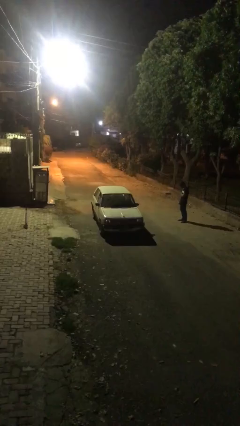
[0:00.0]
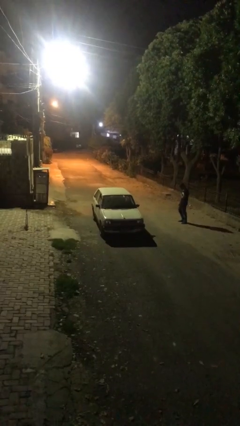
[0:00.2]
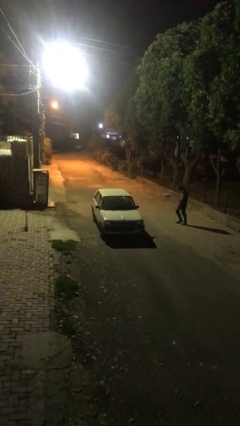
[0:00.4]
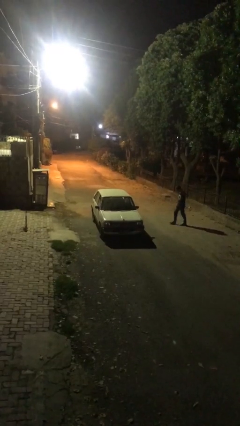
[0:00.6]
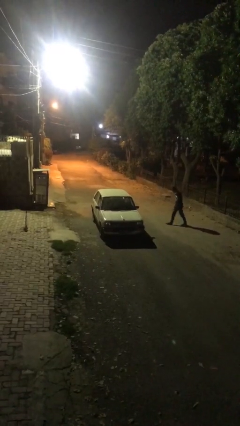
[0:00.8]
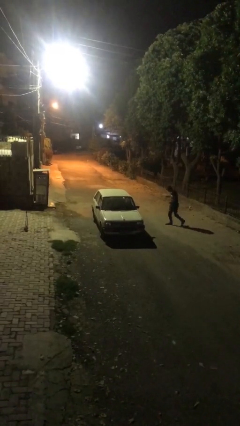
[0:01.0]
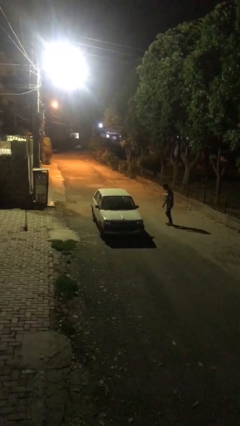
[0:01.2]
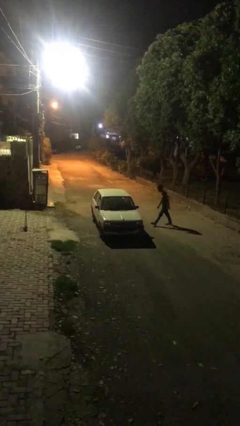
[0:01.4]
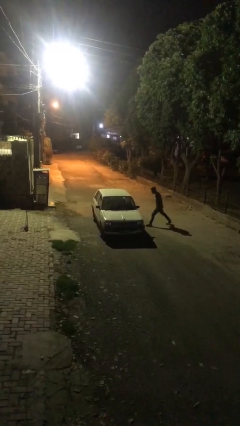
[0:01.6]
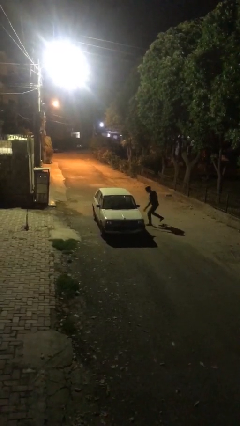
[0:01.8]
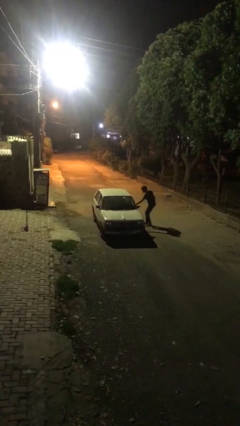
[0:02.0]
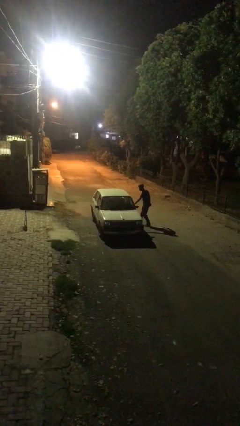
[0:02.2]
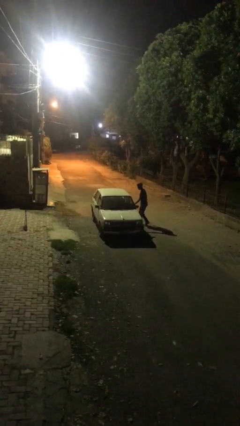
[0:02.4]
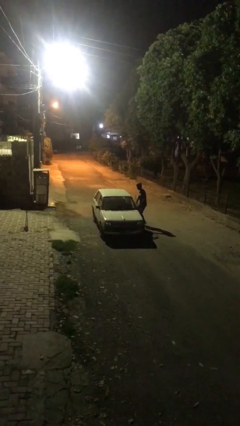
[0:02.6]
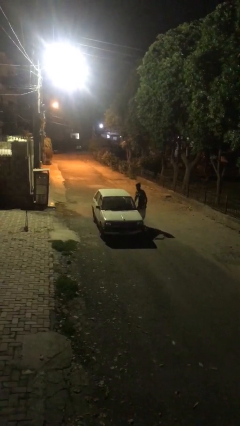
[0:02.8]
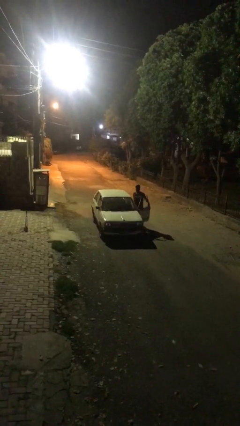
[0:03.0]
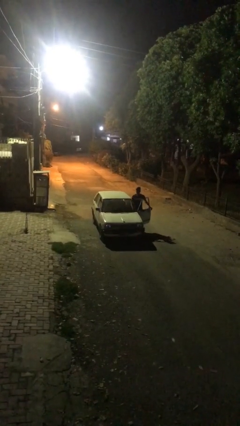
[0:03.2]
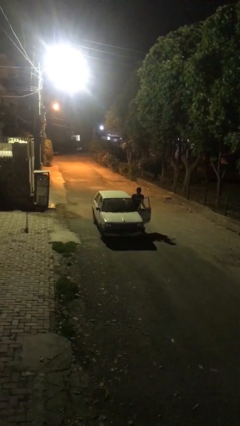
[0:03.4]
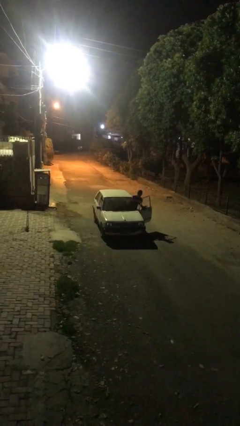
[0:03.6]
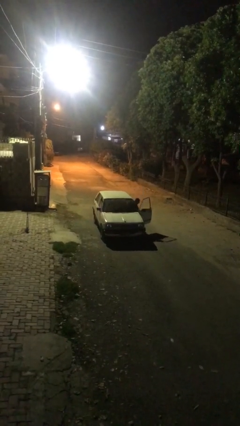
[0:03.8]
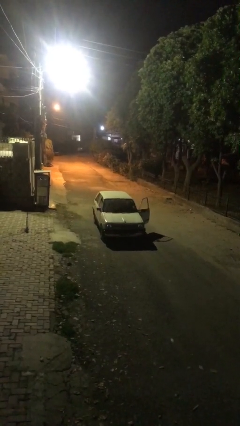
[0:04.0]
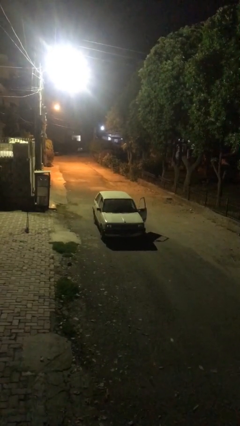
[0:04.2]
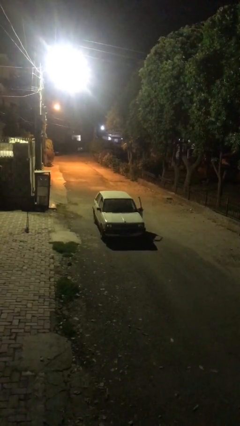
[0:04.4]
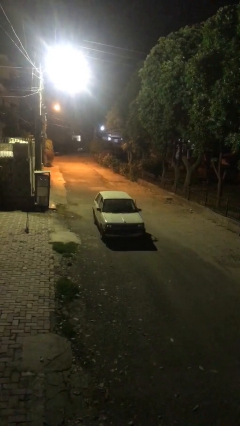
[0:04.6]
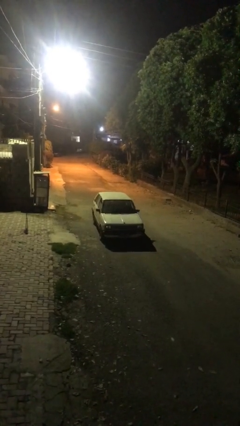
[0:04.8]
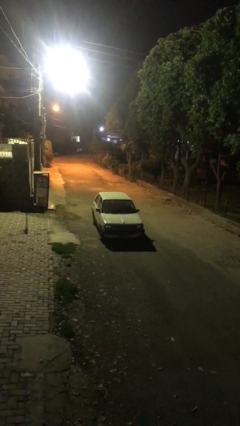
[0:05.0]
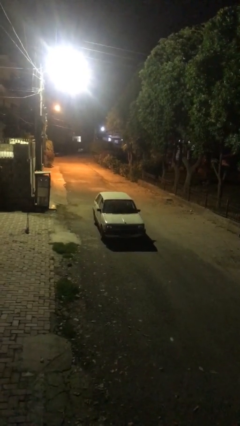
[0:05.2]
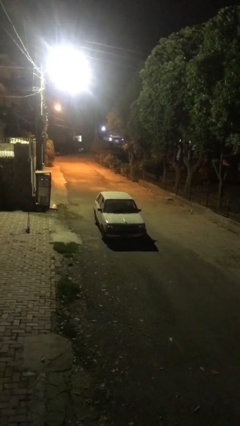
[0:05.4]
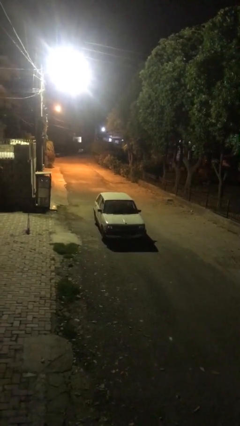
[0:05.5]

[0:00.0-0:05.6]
car picks up person

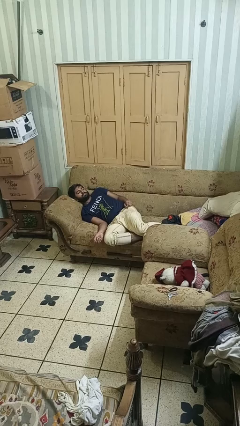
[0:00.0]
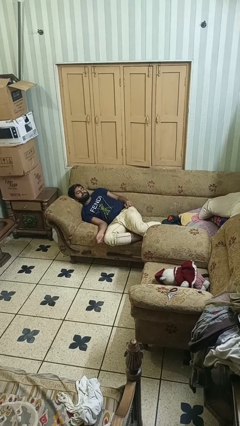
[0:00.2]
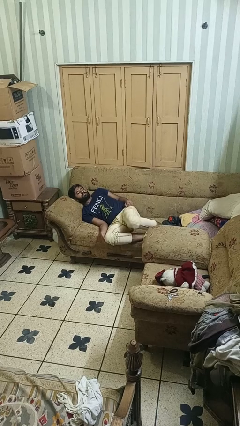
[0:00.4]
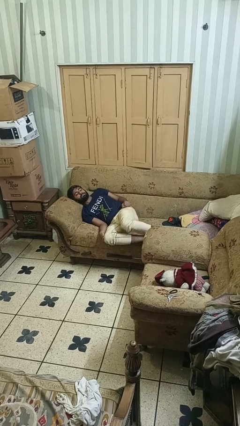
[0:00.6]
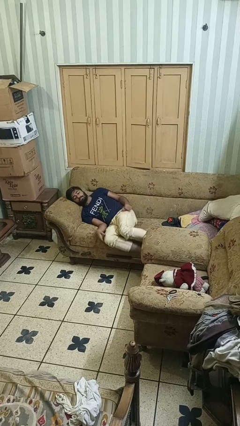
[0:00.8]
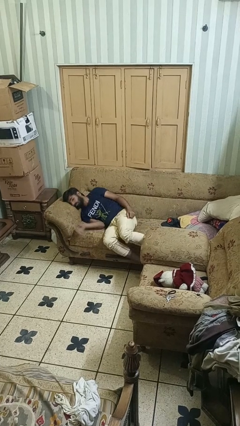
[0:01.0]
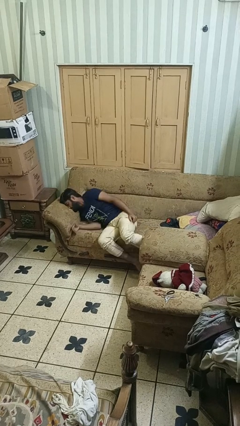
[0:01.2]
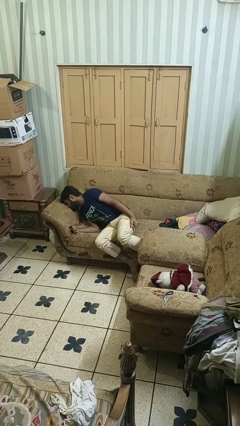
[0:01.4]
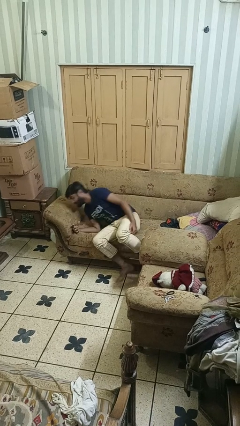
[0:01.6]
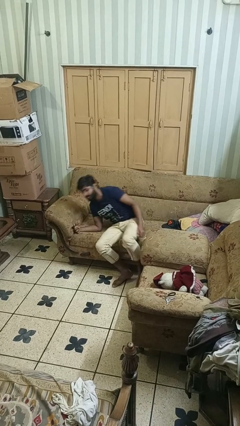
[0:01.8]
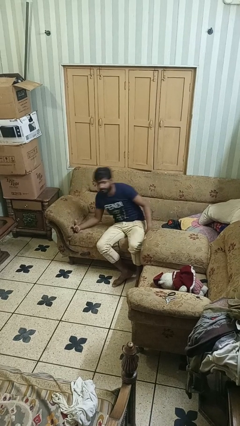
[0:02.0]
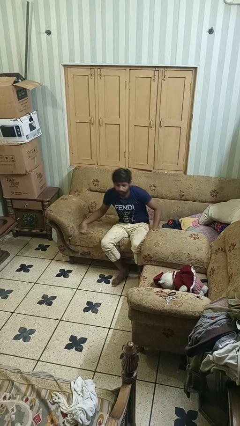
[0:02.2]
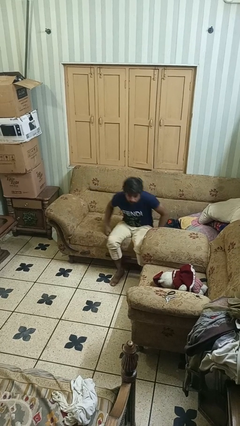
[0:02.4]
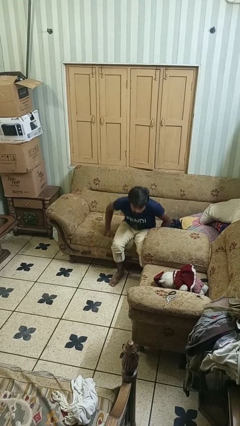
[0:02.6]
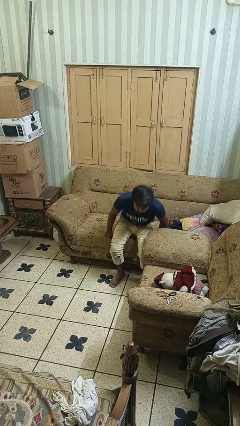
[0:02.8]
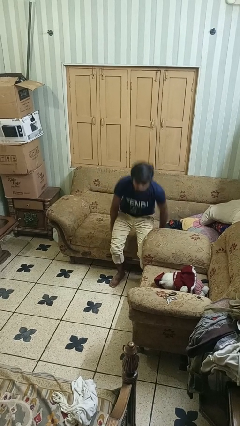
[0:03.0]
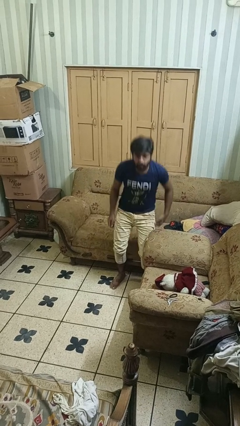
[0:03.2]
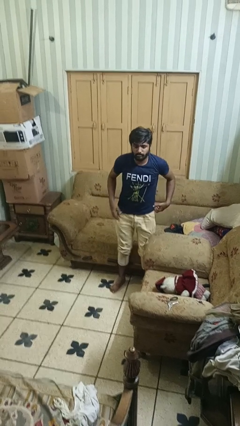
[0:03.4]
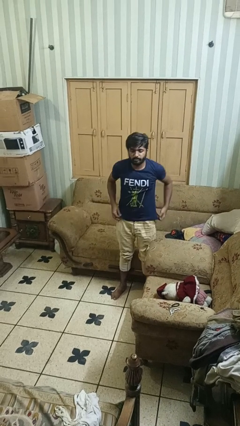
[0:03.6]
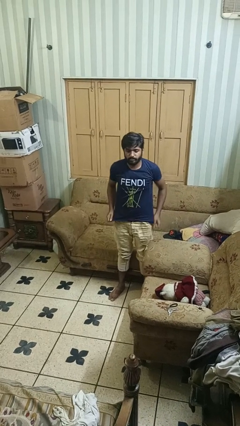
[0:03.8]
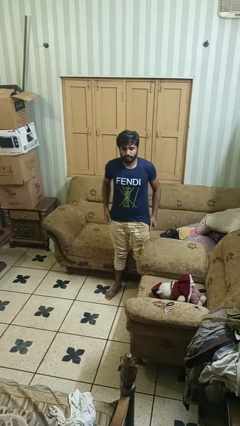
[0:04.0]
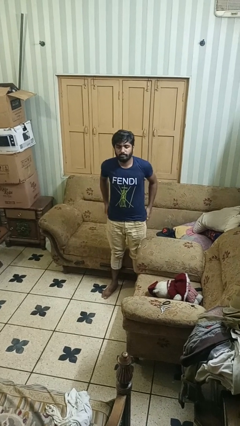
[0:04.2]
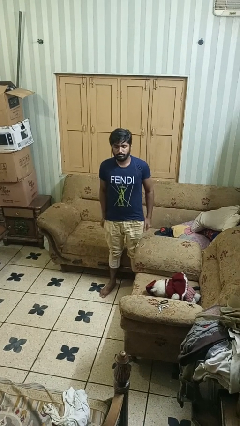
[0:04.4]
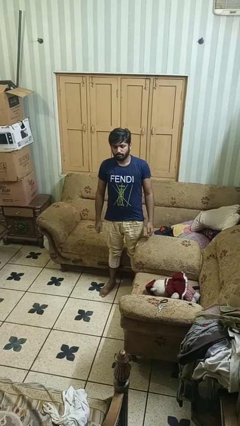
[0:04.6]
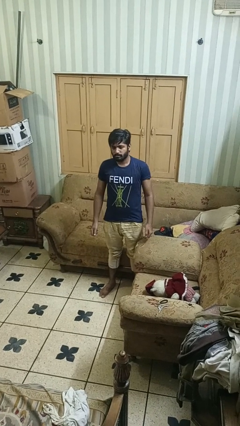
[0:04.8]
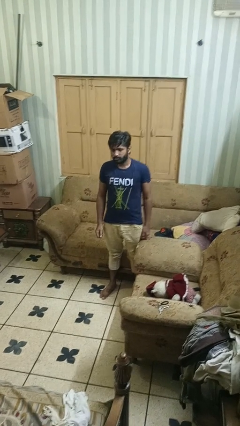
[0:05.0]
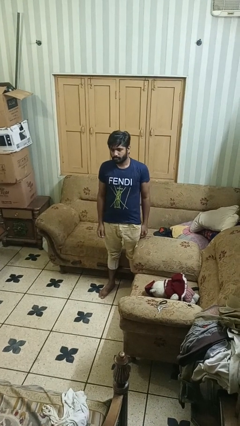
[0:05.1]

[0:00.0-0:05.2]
person stands up

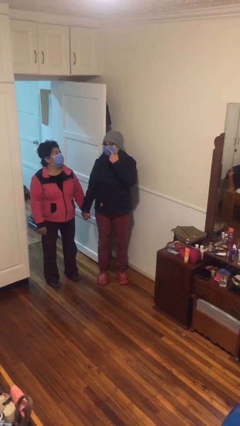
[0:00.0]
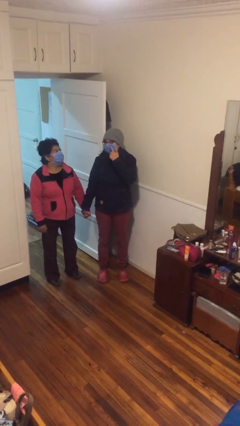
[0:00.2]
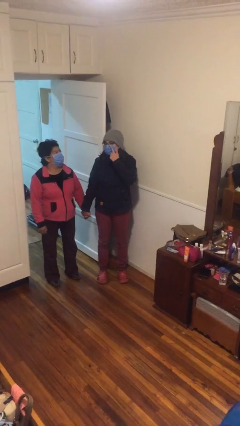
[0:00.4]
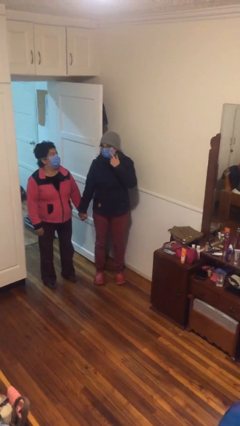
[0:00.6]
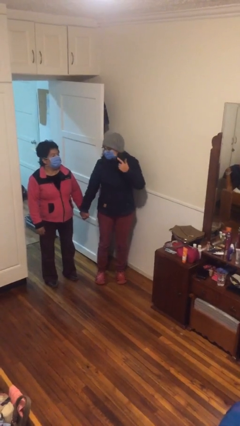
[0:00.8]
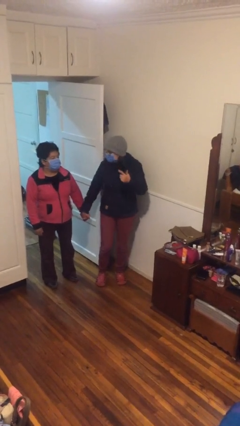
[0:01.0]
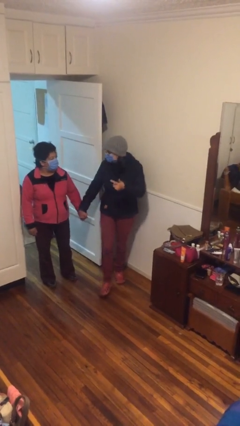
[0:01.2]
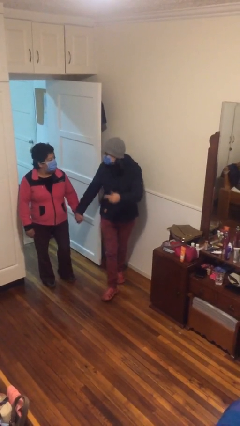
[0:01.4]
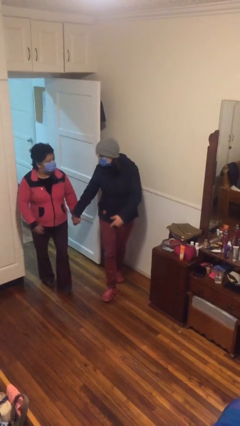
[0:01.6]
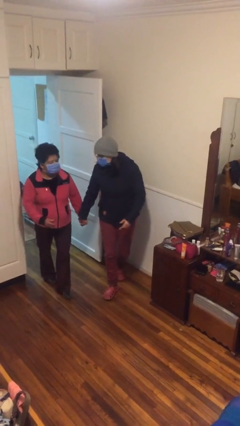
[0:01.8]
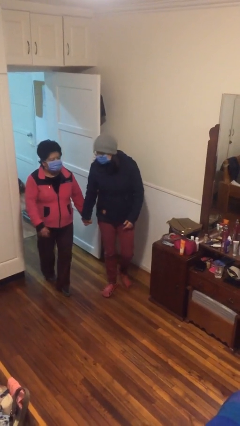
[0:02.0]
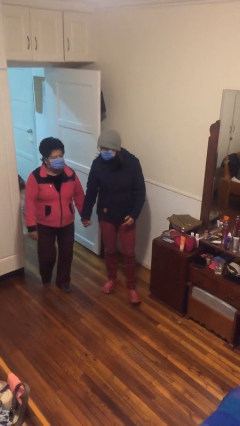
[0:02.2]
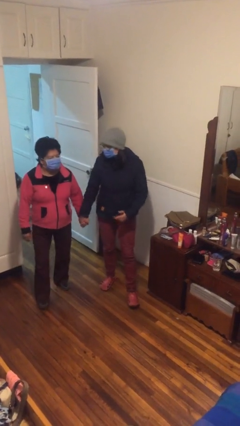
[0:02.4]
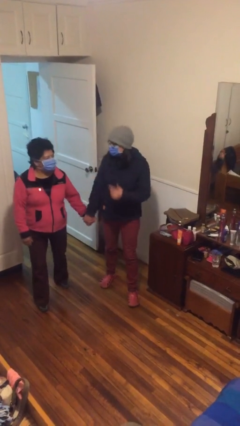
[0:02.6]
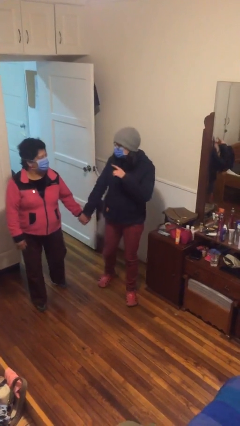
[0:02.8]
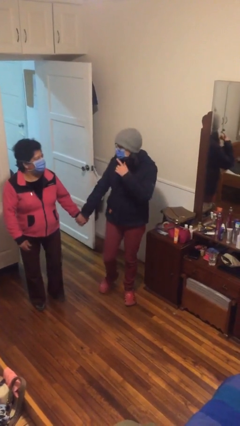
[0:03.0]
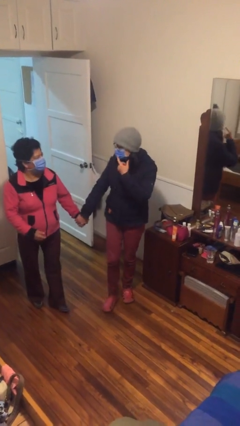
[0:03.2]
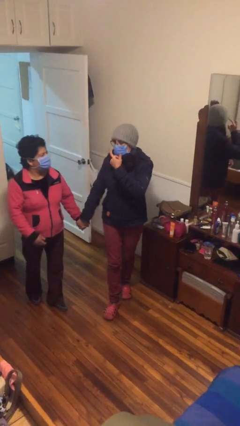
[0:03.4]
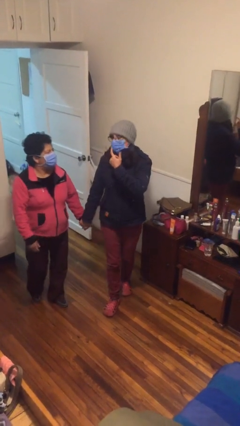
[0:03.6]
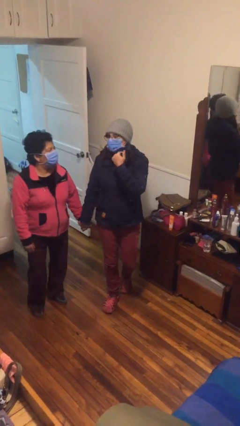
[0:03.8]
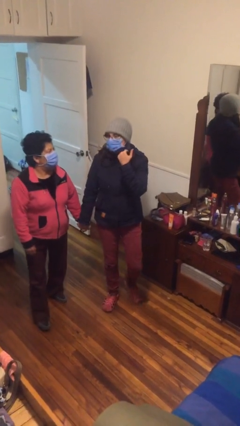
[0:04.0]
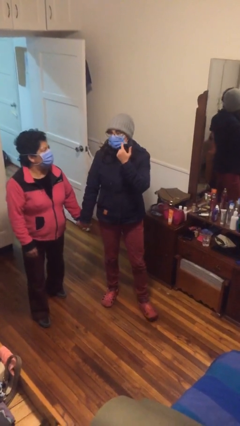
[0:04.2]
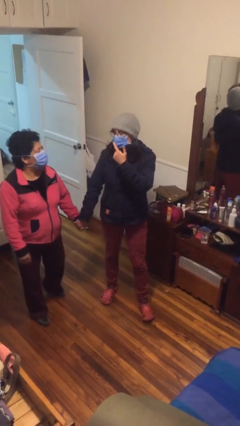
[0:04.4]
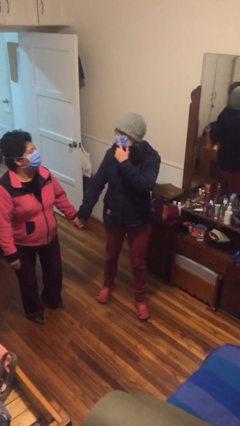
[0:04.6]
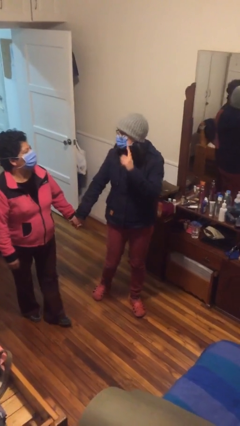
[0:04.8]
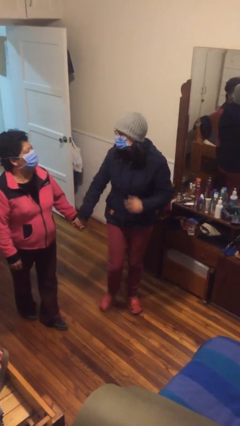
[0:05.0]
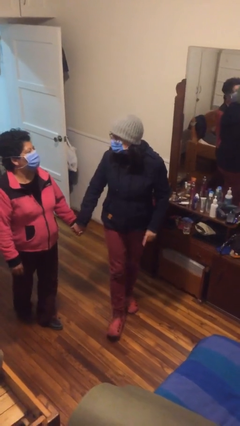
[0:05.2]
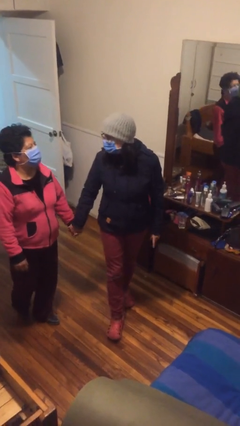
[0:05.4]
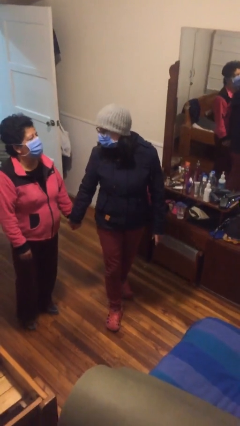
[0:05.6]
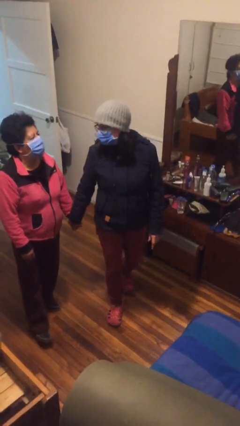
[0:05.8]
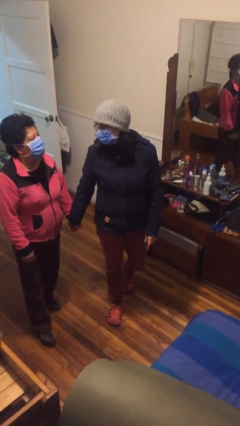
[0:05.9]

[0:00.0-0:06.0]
person holds hand

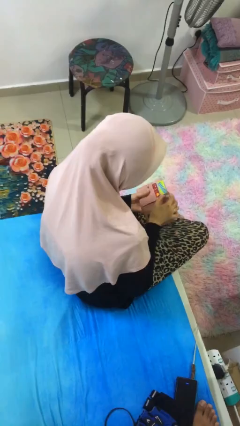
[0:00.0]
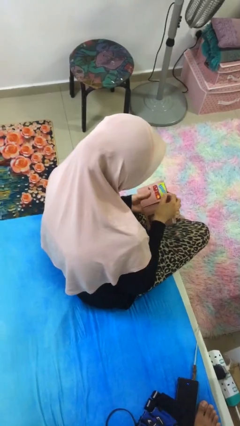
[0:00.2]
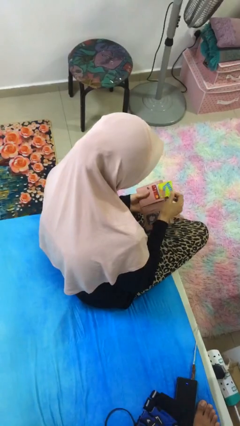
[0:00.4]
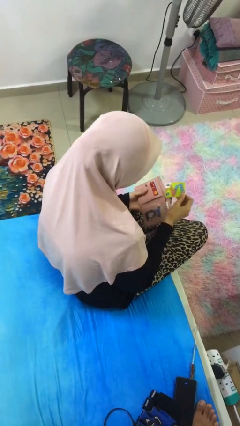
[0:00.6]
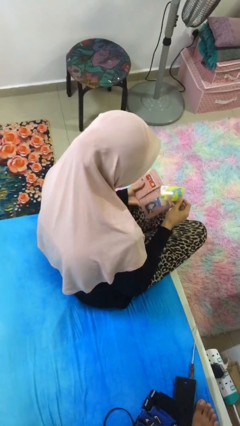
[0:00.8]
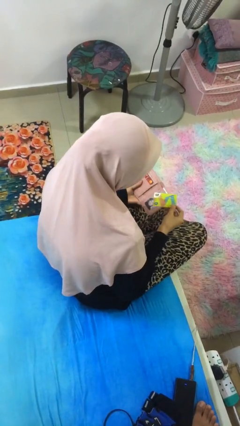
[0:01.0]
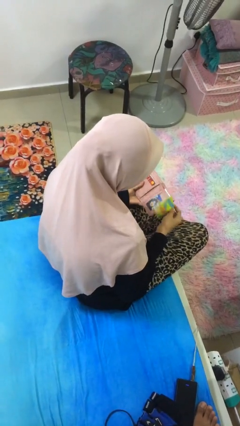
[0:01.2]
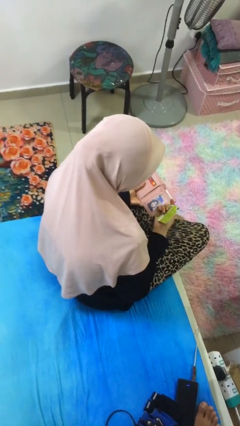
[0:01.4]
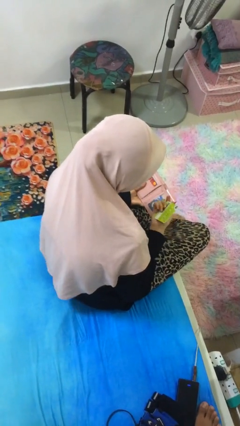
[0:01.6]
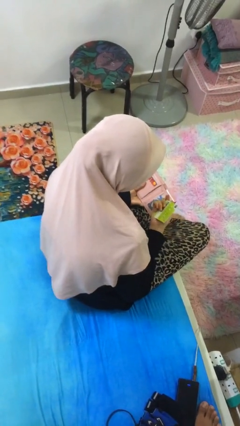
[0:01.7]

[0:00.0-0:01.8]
person takes object from purse
